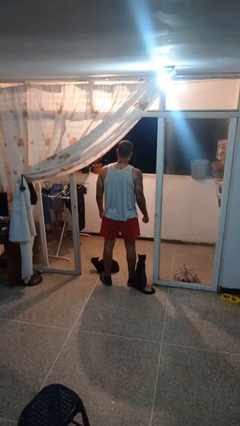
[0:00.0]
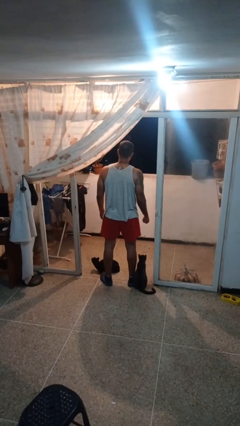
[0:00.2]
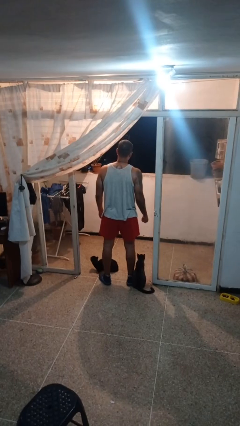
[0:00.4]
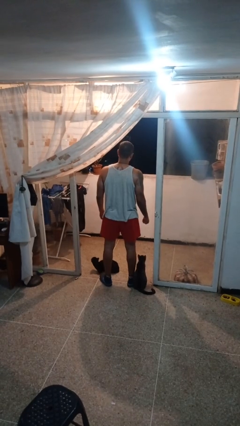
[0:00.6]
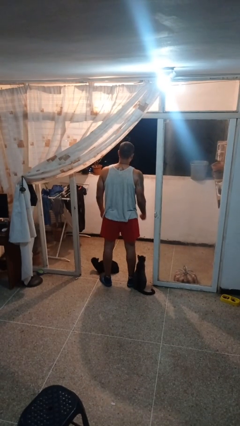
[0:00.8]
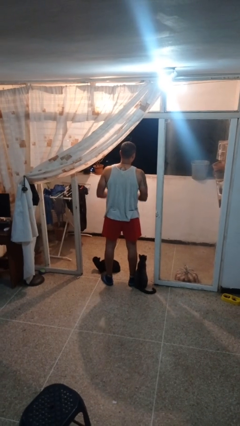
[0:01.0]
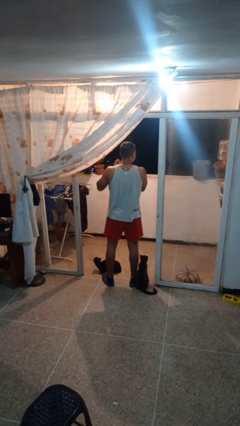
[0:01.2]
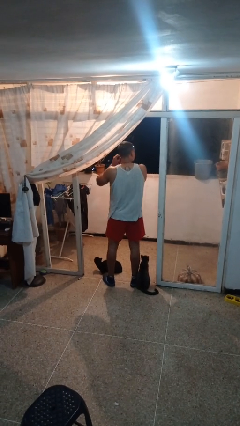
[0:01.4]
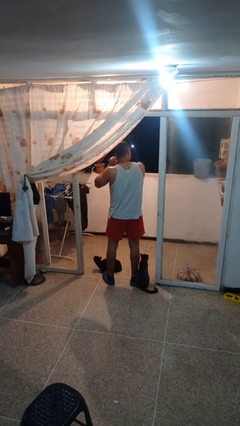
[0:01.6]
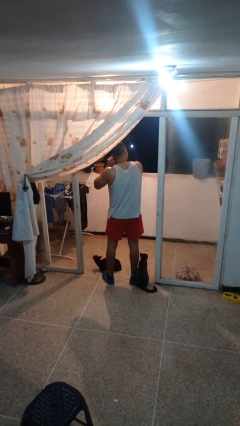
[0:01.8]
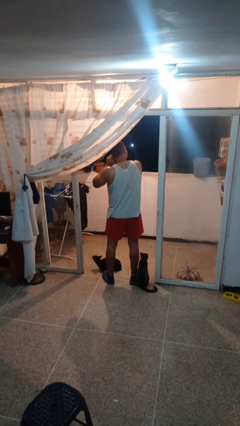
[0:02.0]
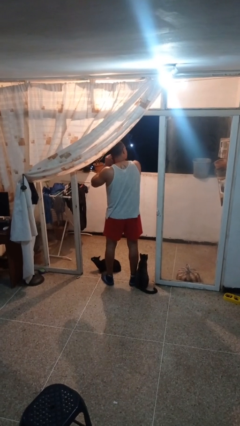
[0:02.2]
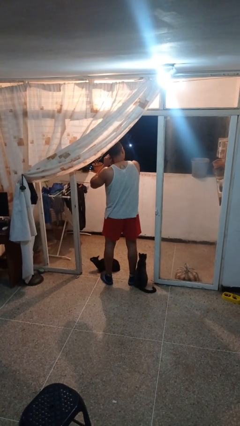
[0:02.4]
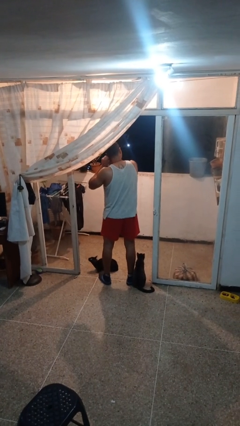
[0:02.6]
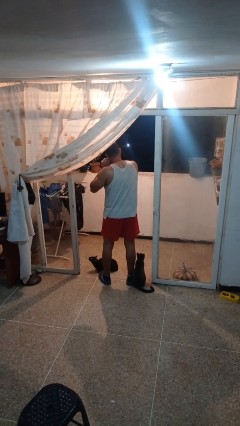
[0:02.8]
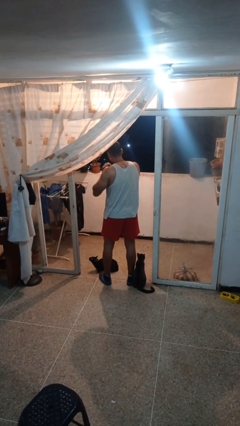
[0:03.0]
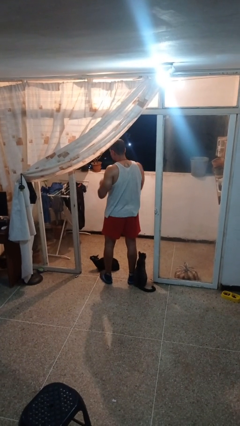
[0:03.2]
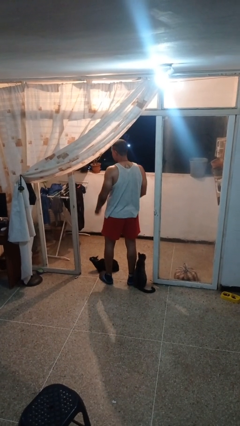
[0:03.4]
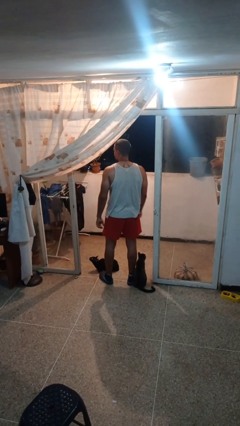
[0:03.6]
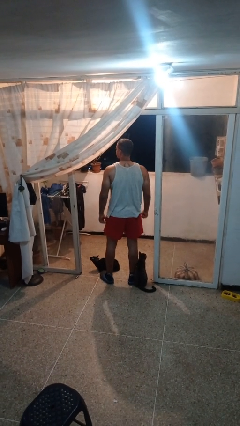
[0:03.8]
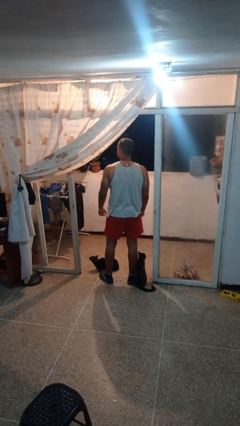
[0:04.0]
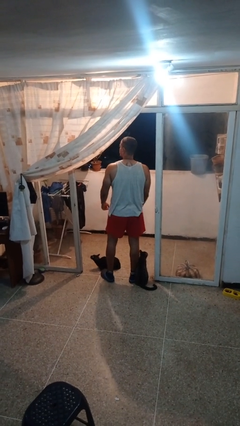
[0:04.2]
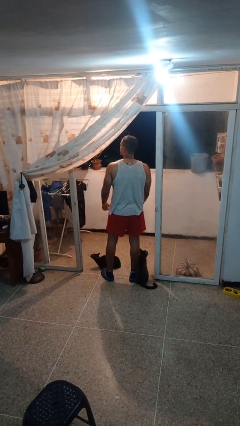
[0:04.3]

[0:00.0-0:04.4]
person puts on earrings

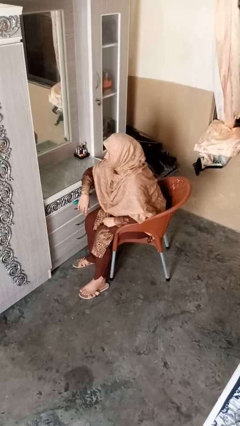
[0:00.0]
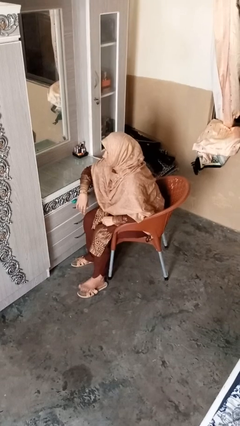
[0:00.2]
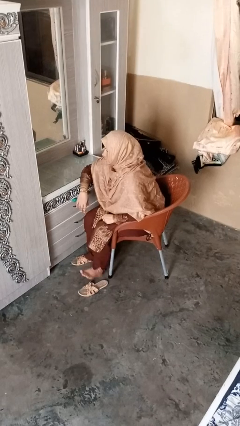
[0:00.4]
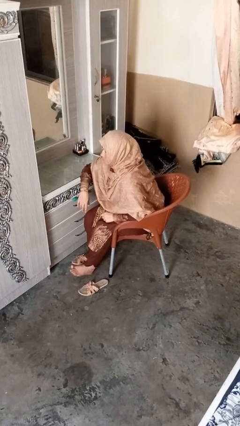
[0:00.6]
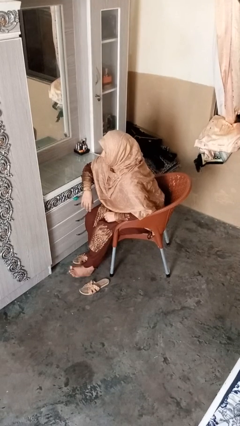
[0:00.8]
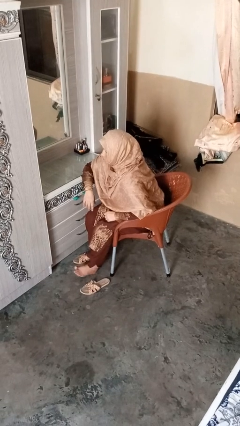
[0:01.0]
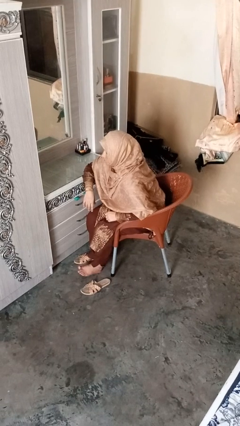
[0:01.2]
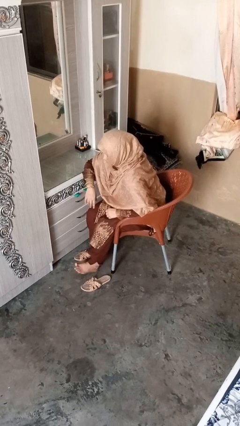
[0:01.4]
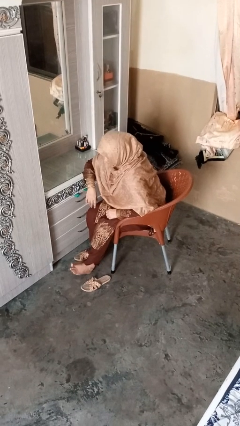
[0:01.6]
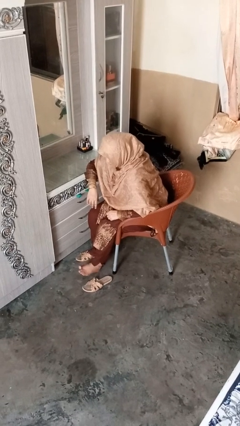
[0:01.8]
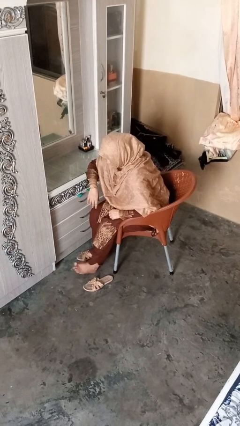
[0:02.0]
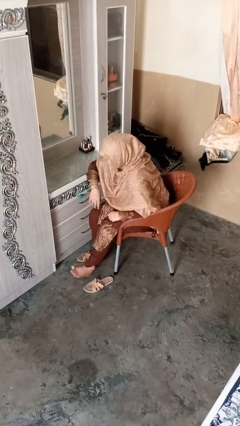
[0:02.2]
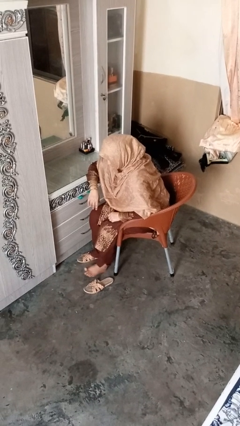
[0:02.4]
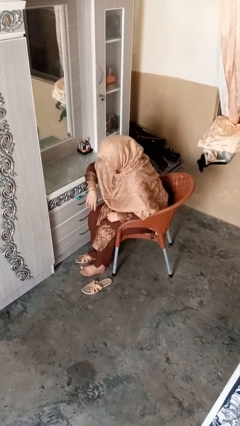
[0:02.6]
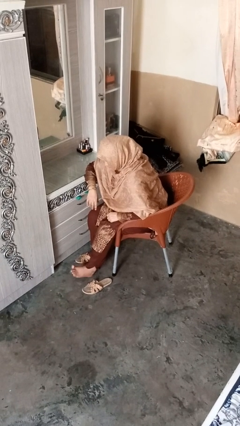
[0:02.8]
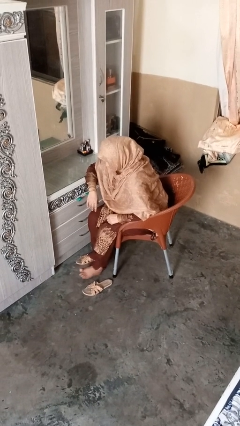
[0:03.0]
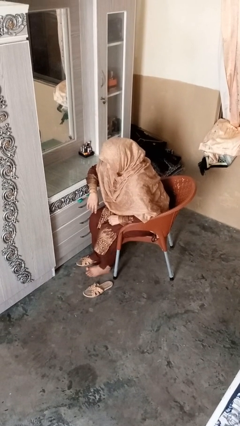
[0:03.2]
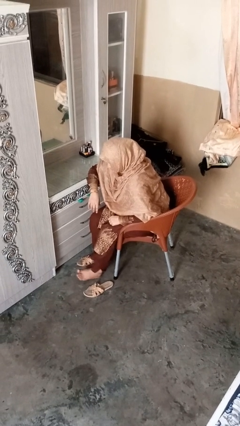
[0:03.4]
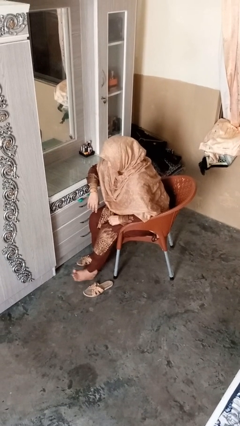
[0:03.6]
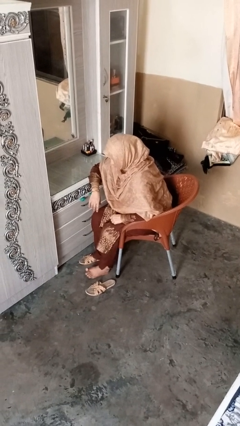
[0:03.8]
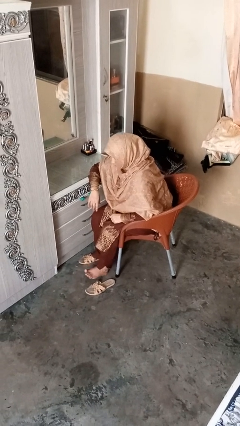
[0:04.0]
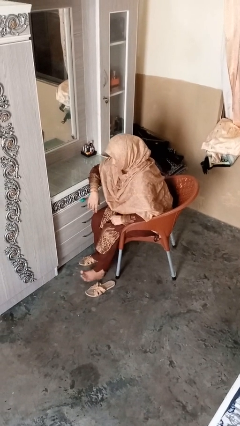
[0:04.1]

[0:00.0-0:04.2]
person rubs foot

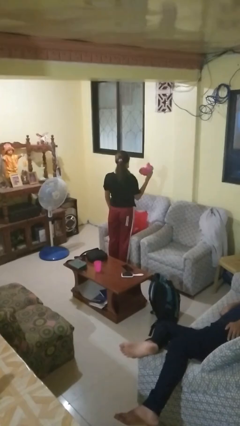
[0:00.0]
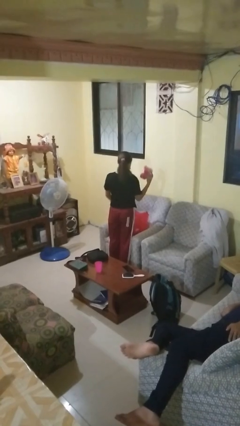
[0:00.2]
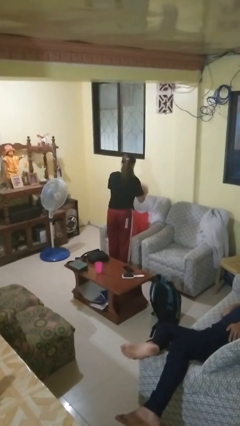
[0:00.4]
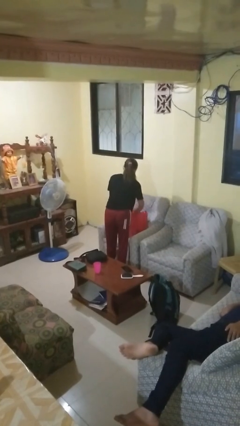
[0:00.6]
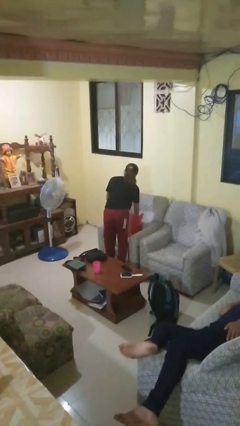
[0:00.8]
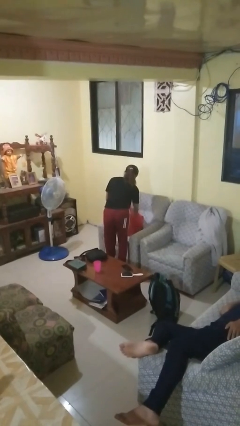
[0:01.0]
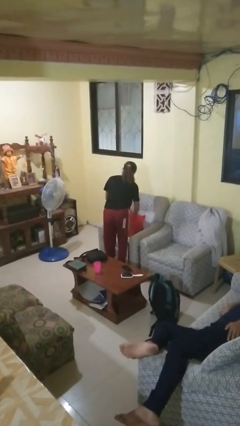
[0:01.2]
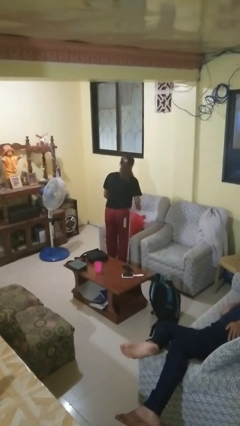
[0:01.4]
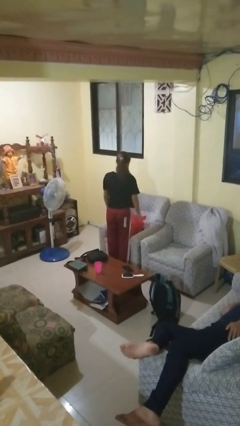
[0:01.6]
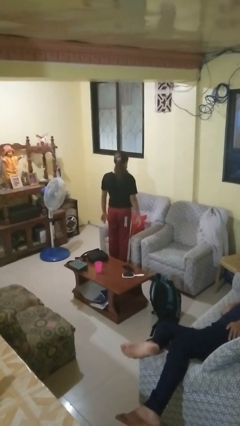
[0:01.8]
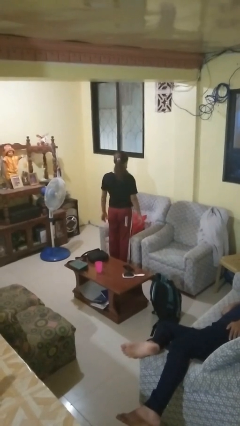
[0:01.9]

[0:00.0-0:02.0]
person puts object into bag

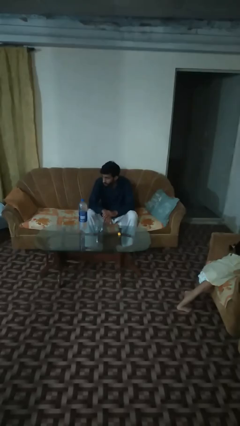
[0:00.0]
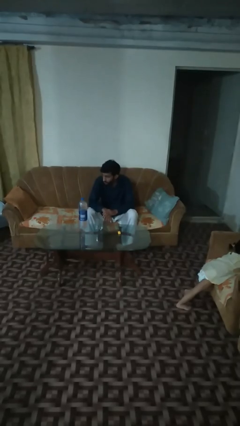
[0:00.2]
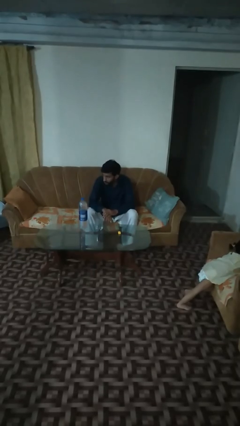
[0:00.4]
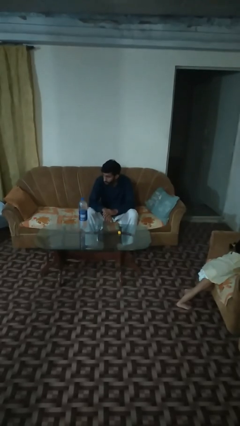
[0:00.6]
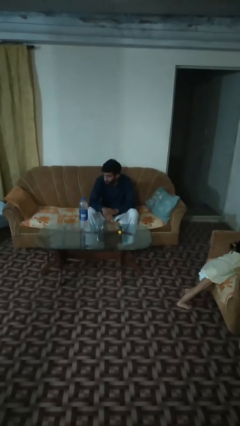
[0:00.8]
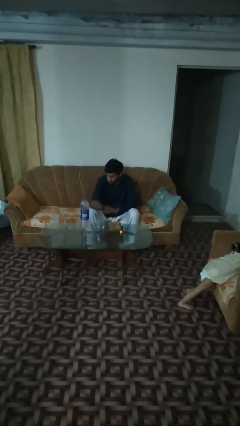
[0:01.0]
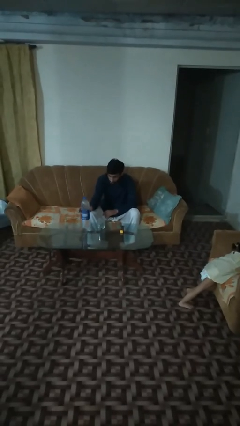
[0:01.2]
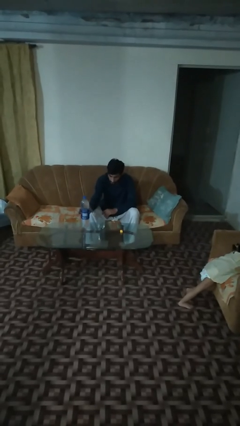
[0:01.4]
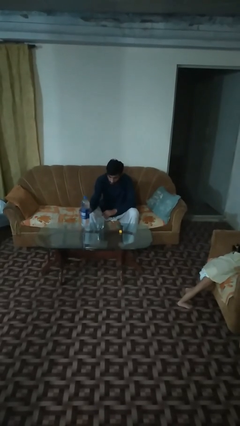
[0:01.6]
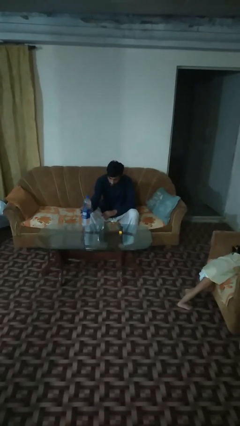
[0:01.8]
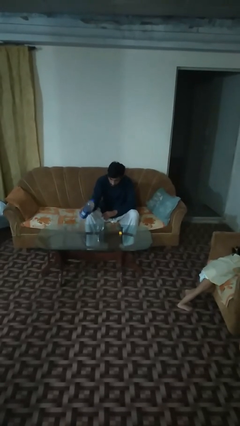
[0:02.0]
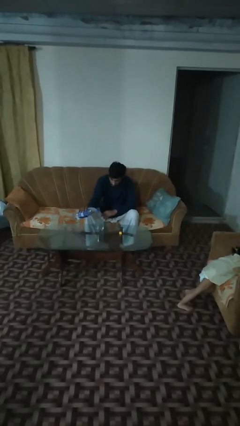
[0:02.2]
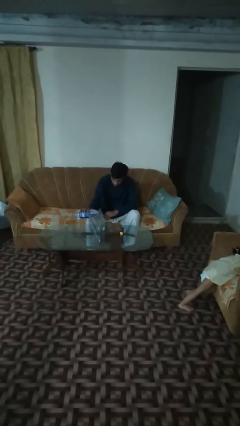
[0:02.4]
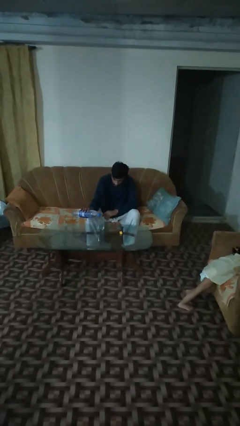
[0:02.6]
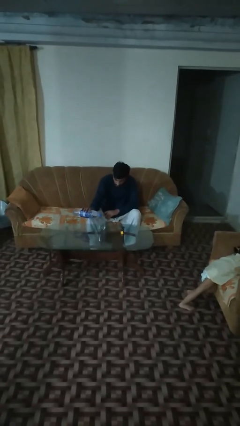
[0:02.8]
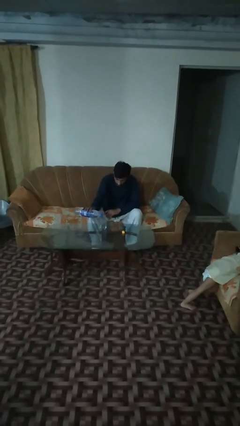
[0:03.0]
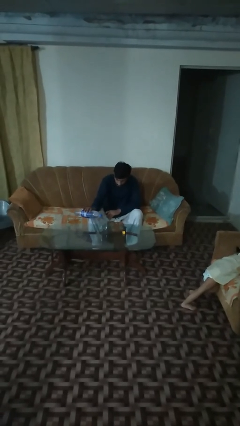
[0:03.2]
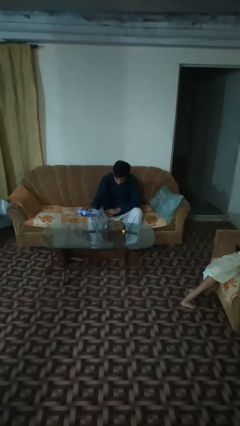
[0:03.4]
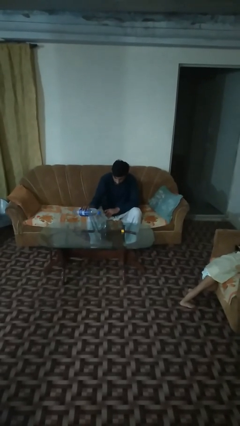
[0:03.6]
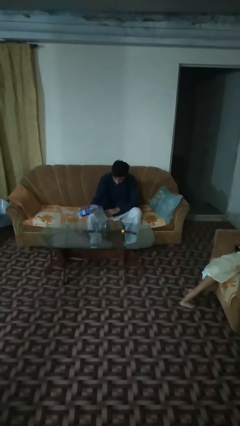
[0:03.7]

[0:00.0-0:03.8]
person pours liquid into cup

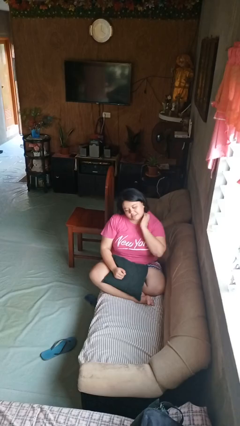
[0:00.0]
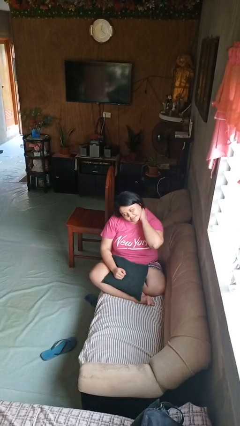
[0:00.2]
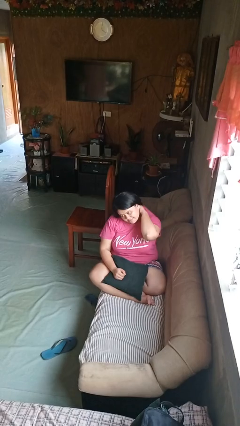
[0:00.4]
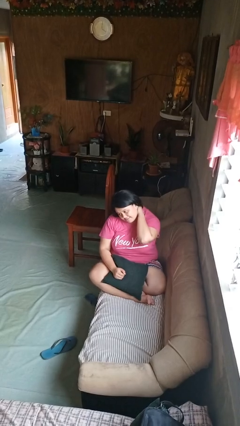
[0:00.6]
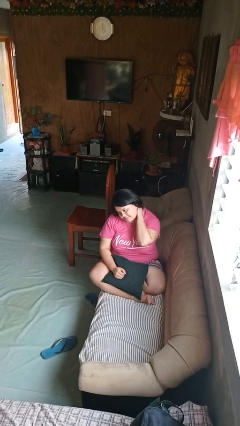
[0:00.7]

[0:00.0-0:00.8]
person rubs neck

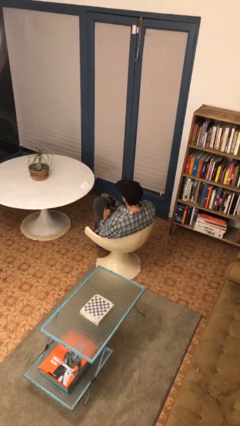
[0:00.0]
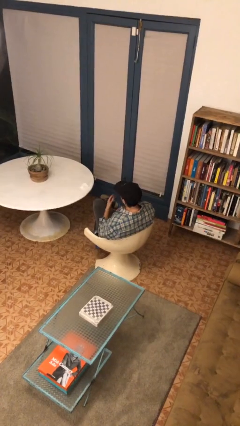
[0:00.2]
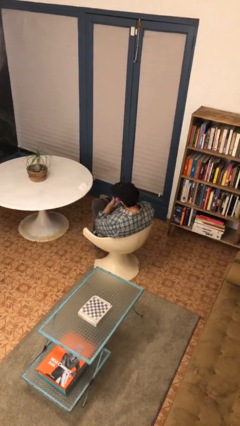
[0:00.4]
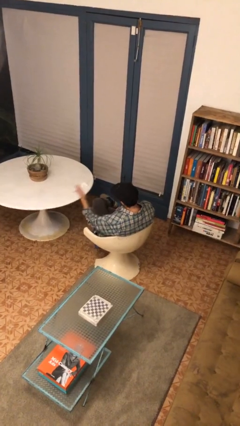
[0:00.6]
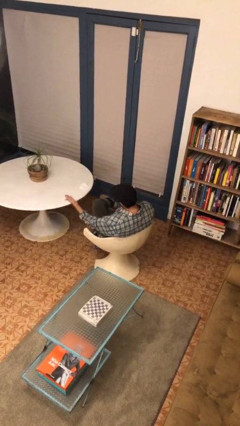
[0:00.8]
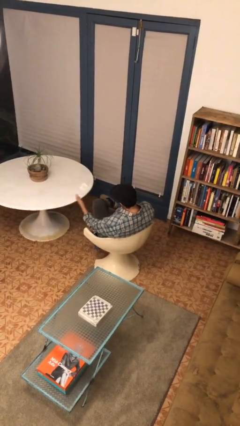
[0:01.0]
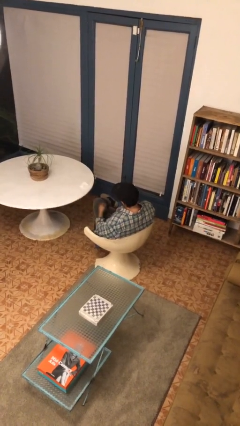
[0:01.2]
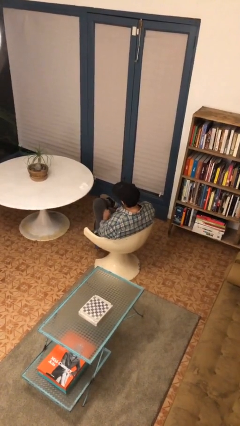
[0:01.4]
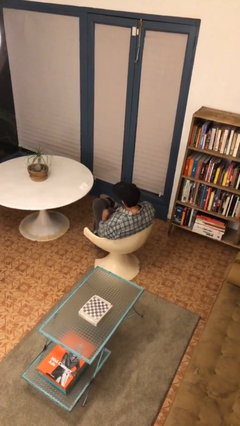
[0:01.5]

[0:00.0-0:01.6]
person gestures blow kiss

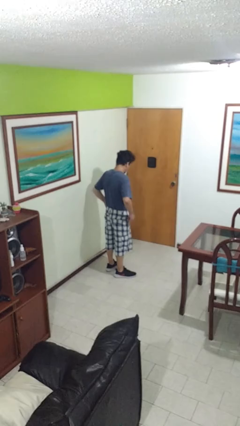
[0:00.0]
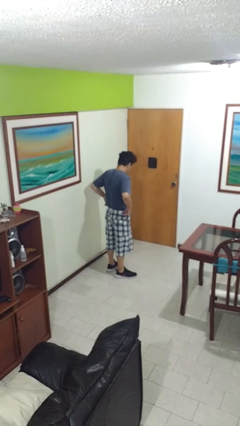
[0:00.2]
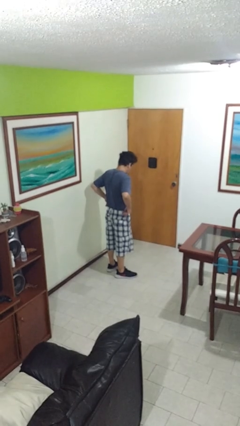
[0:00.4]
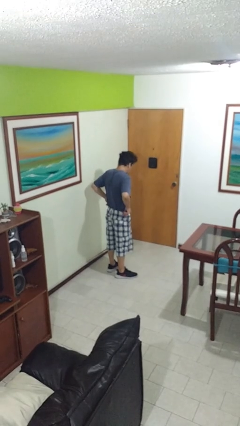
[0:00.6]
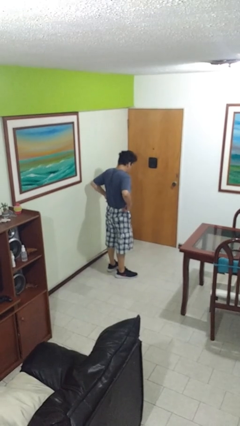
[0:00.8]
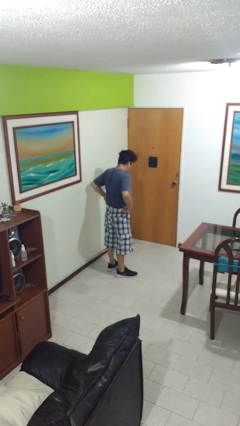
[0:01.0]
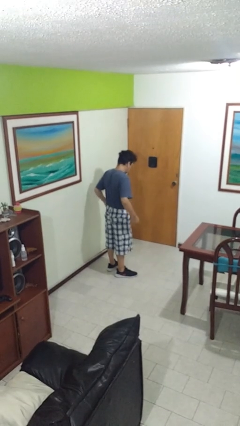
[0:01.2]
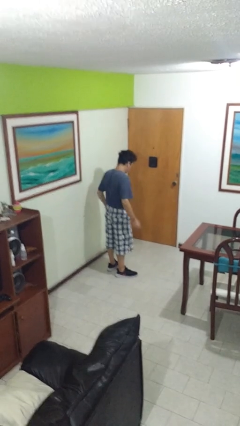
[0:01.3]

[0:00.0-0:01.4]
person hikes up pants
